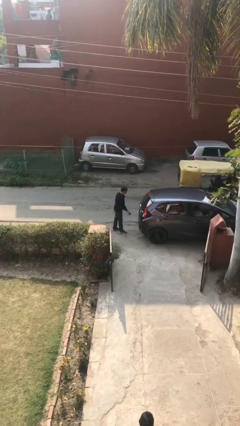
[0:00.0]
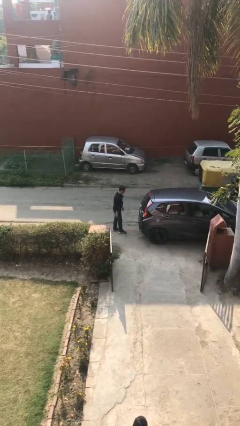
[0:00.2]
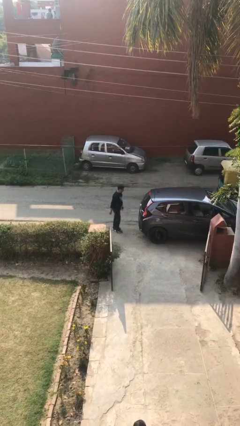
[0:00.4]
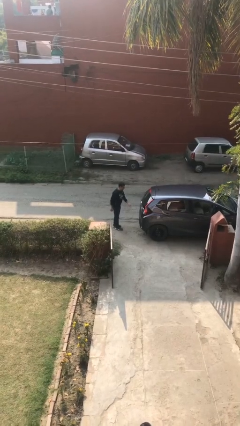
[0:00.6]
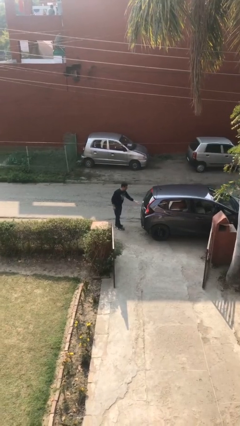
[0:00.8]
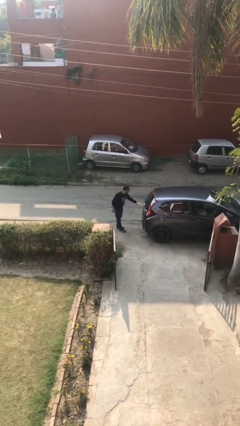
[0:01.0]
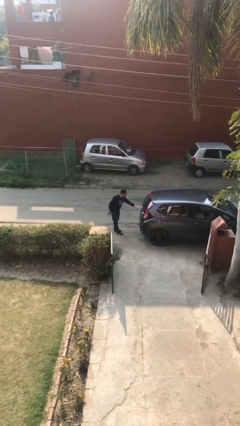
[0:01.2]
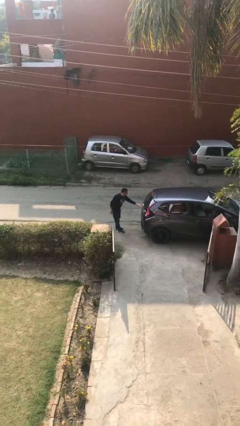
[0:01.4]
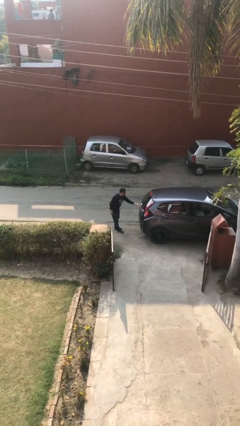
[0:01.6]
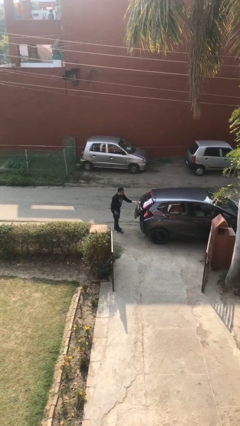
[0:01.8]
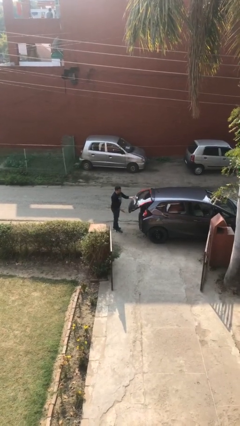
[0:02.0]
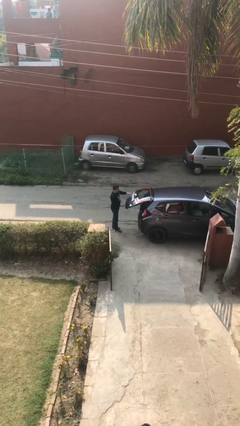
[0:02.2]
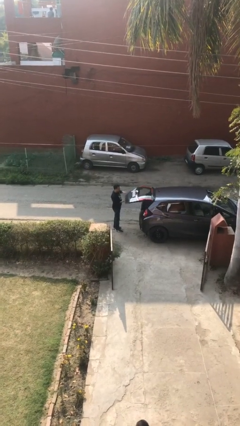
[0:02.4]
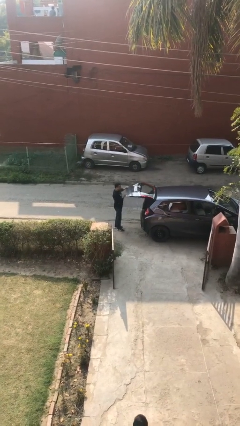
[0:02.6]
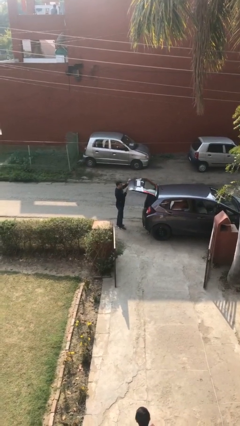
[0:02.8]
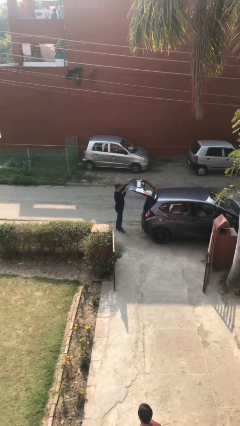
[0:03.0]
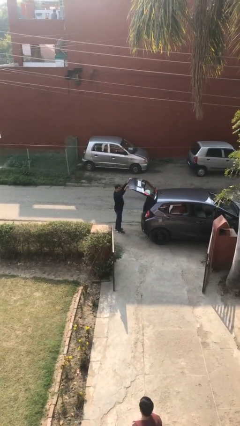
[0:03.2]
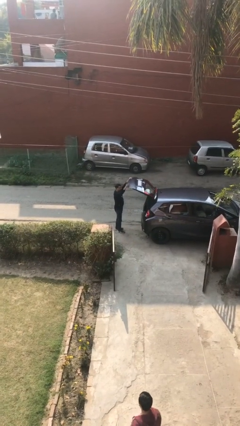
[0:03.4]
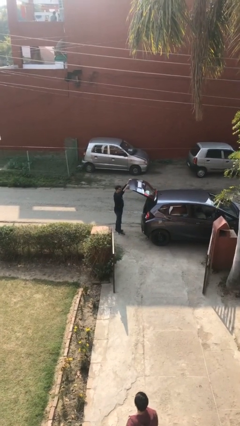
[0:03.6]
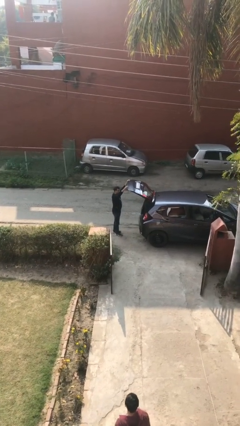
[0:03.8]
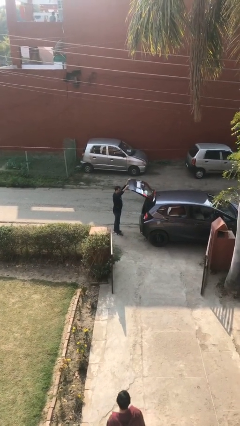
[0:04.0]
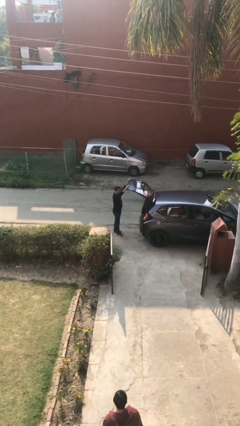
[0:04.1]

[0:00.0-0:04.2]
person opens car trunk

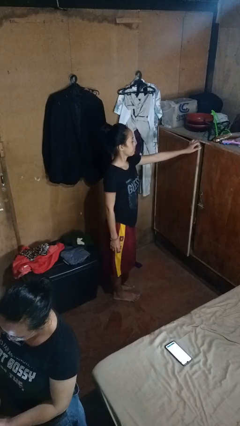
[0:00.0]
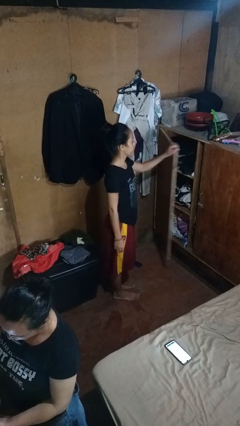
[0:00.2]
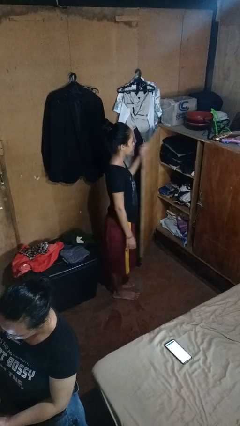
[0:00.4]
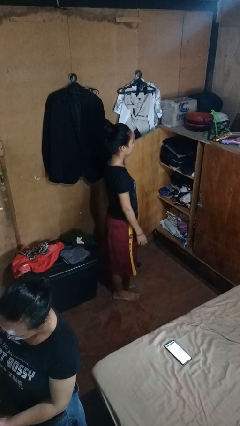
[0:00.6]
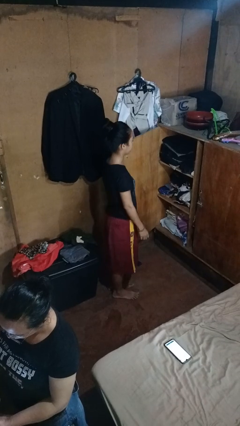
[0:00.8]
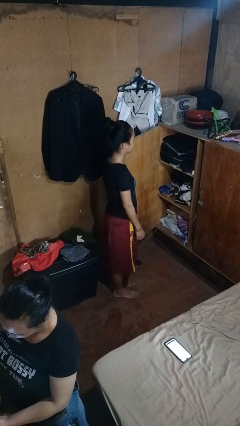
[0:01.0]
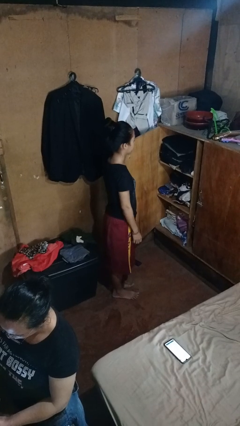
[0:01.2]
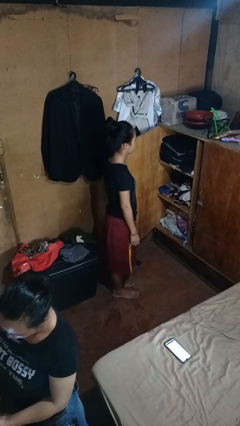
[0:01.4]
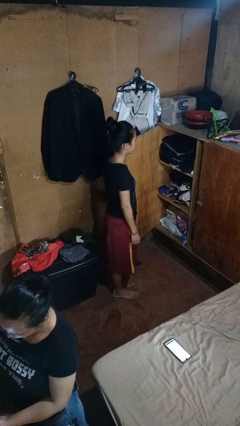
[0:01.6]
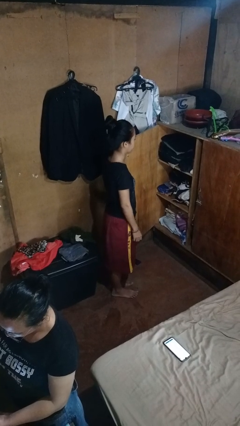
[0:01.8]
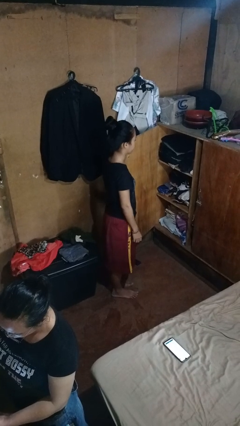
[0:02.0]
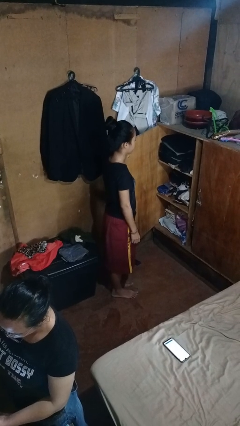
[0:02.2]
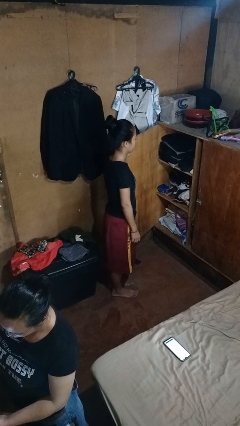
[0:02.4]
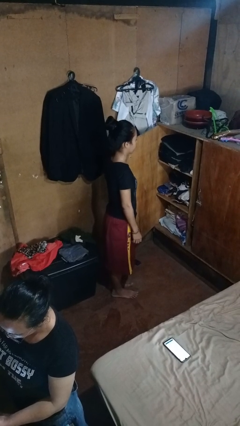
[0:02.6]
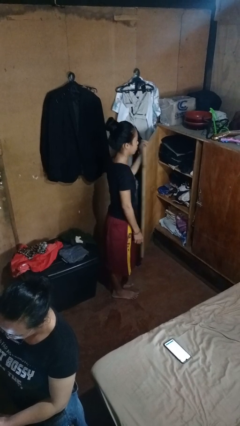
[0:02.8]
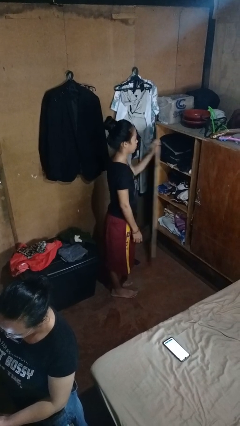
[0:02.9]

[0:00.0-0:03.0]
person opens closet door

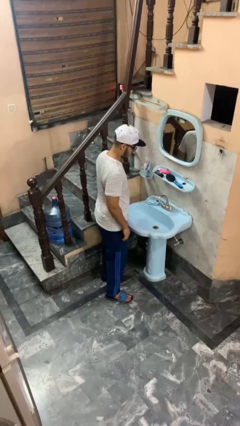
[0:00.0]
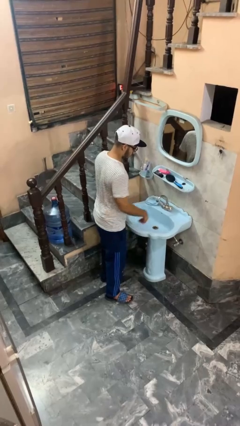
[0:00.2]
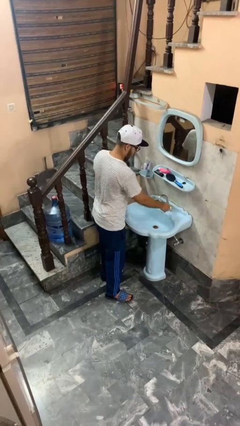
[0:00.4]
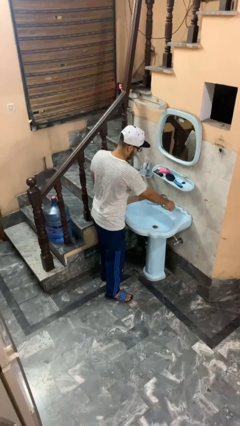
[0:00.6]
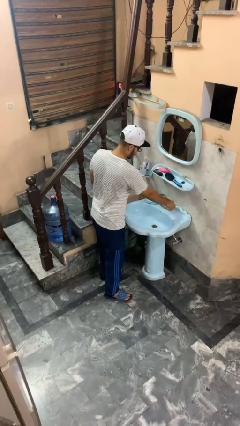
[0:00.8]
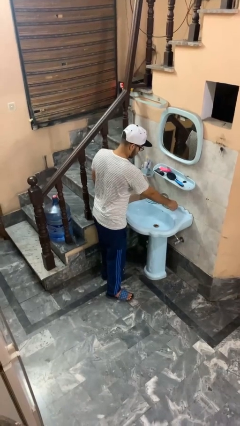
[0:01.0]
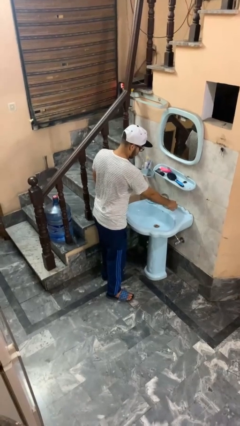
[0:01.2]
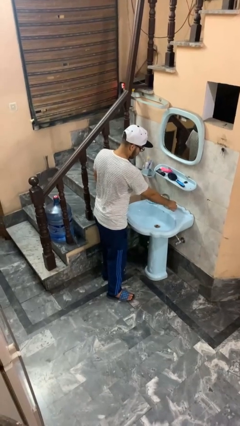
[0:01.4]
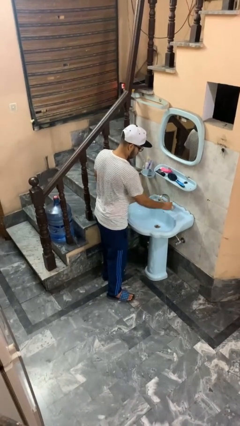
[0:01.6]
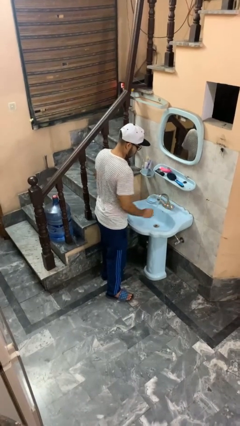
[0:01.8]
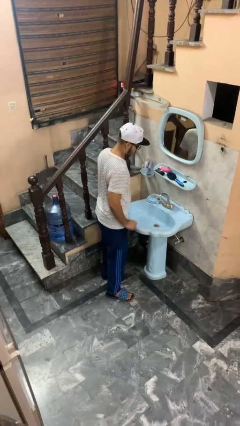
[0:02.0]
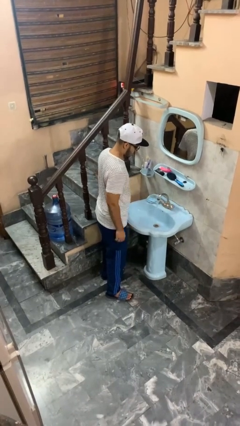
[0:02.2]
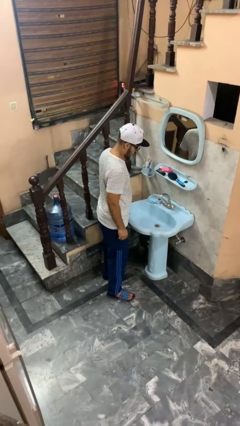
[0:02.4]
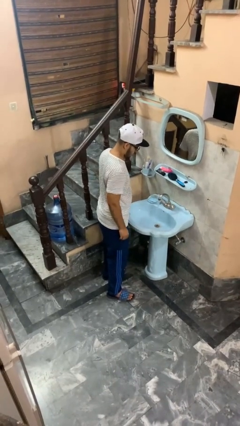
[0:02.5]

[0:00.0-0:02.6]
person turns on faucet

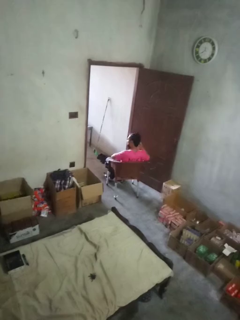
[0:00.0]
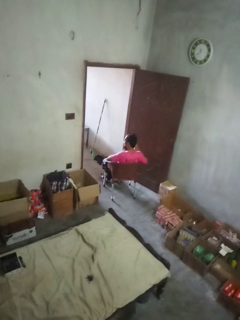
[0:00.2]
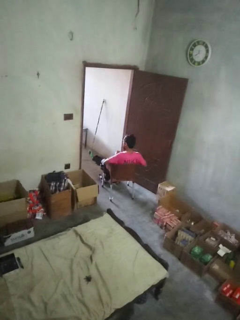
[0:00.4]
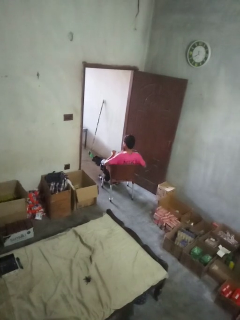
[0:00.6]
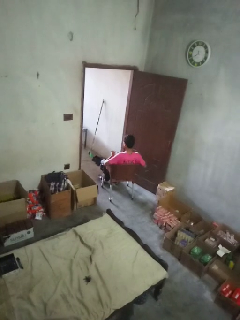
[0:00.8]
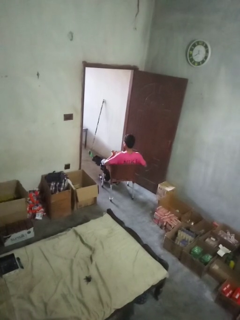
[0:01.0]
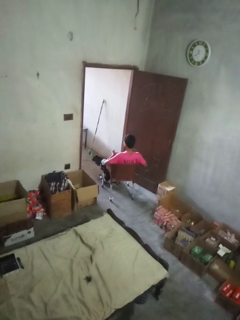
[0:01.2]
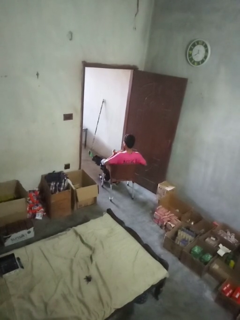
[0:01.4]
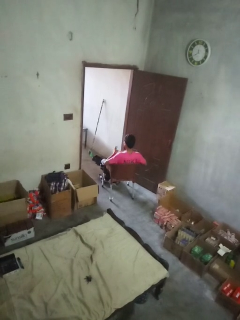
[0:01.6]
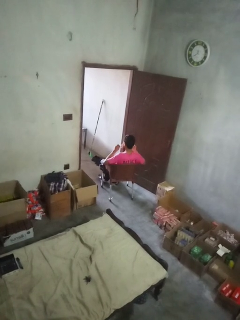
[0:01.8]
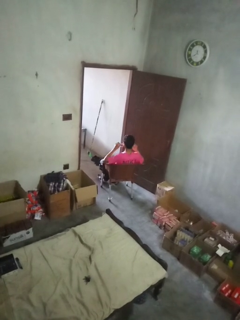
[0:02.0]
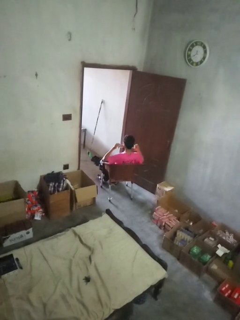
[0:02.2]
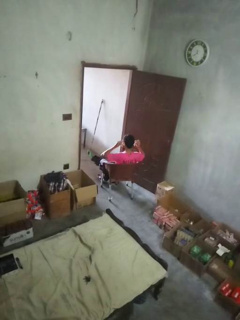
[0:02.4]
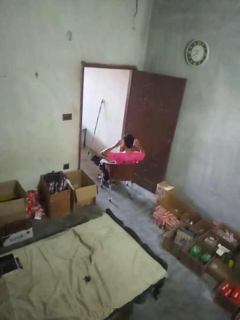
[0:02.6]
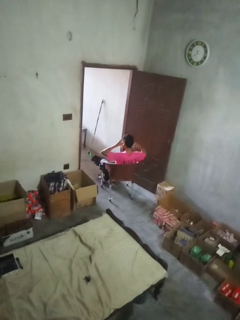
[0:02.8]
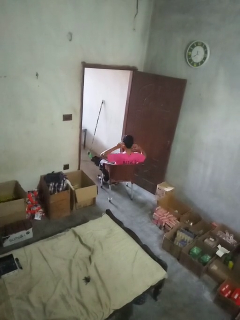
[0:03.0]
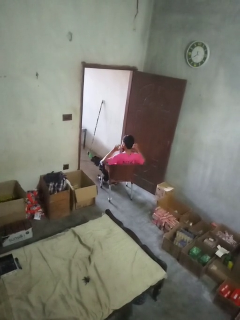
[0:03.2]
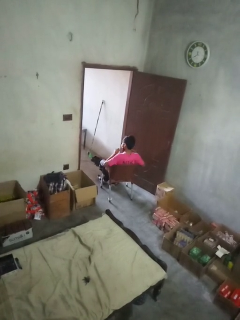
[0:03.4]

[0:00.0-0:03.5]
person puts on facemask

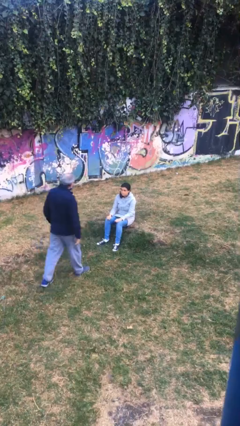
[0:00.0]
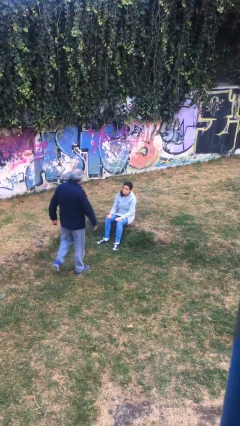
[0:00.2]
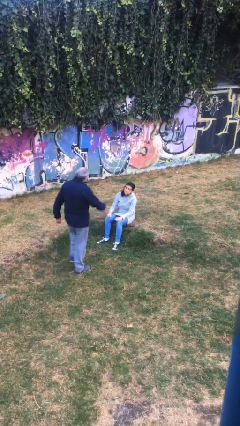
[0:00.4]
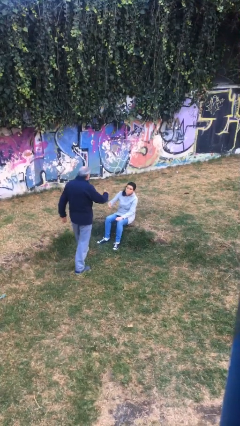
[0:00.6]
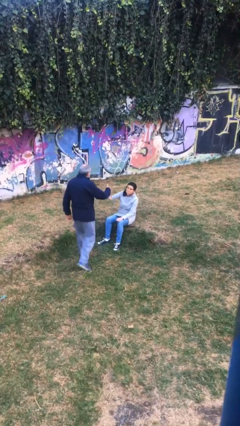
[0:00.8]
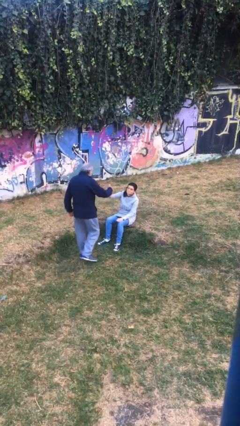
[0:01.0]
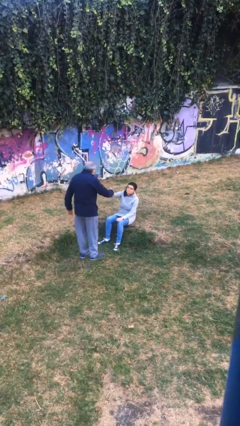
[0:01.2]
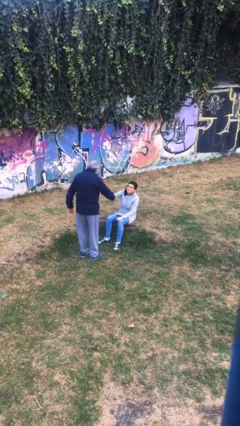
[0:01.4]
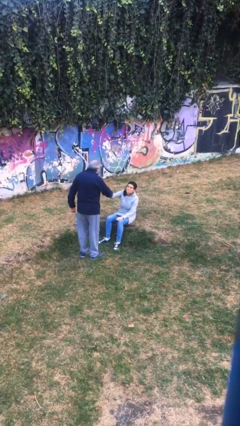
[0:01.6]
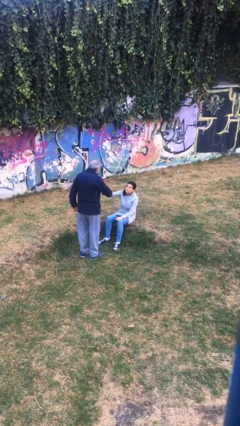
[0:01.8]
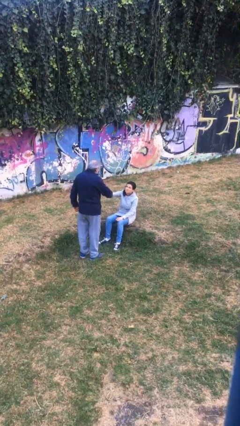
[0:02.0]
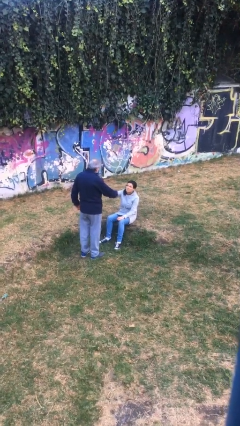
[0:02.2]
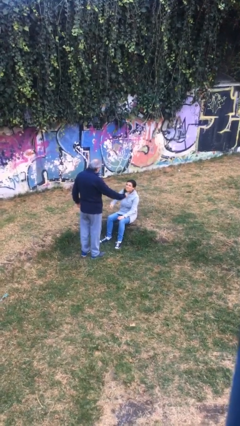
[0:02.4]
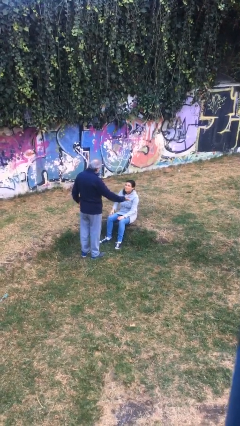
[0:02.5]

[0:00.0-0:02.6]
person shakes hand

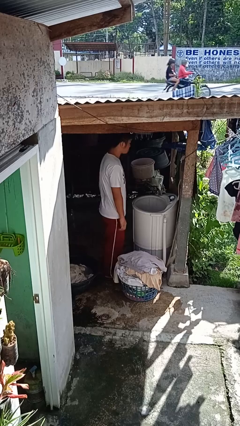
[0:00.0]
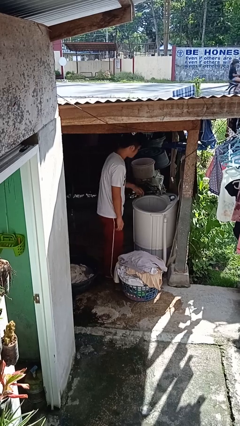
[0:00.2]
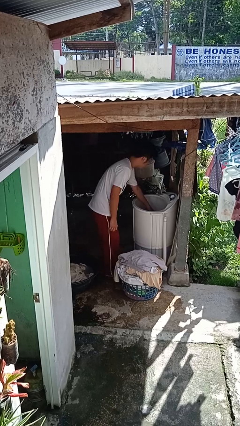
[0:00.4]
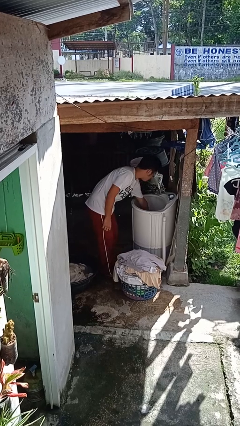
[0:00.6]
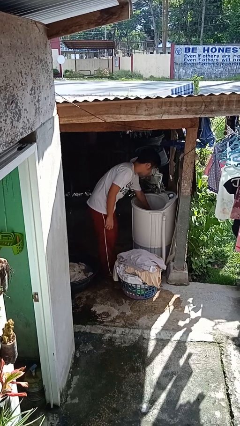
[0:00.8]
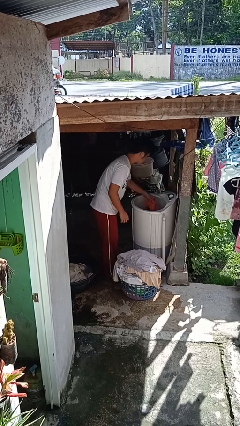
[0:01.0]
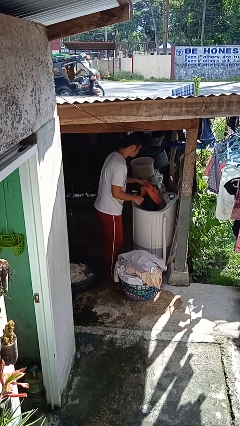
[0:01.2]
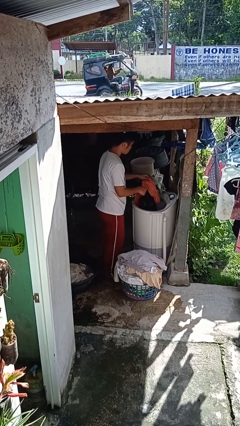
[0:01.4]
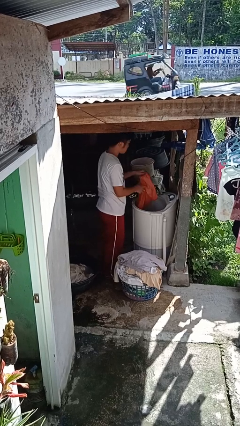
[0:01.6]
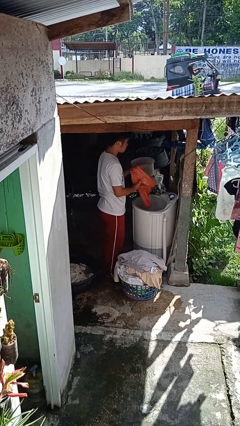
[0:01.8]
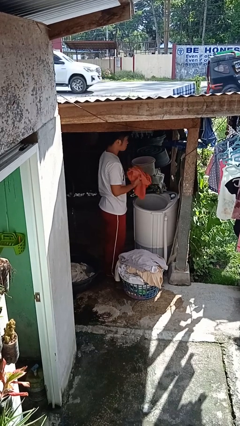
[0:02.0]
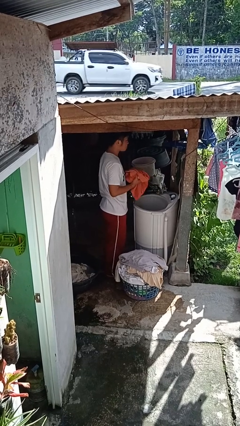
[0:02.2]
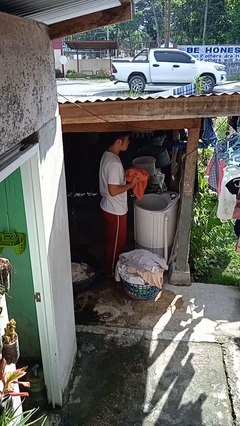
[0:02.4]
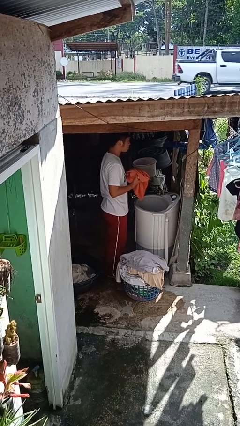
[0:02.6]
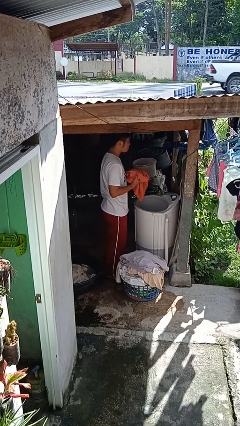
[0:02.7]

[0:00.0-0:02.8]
person unloads clotheswasher
